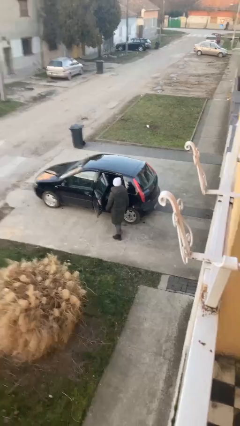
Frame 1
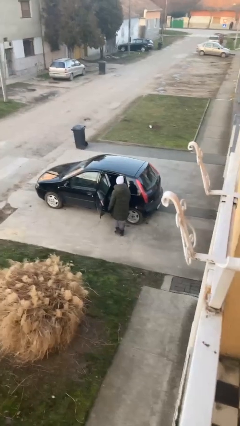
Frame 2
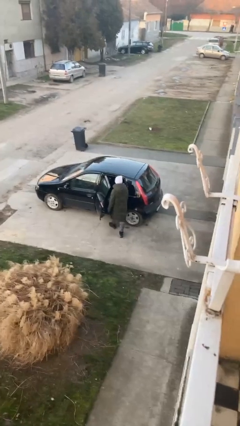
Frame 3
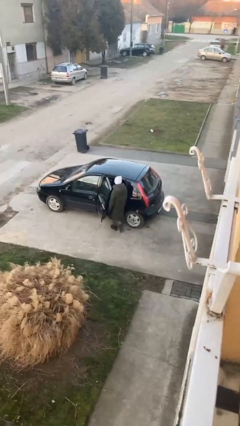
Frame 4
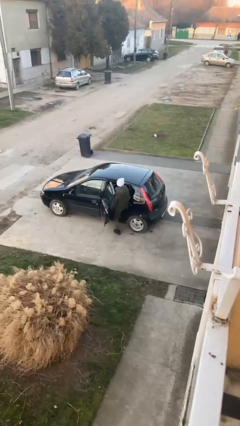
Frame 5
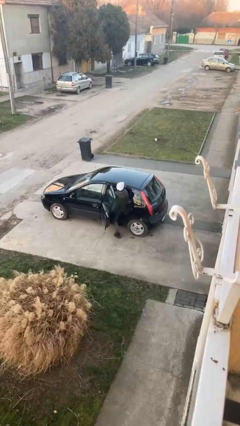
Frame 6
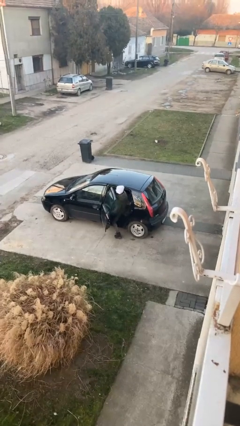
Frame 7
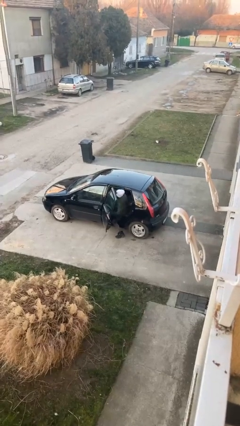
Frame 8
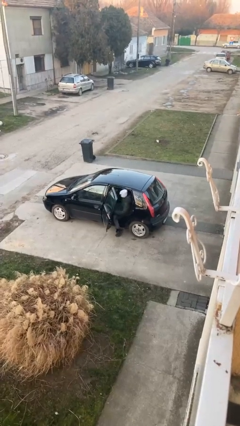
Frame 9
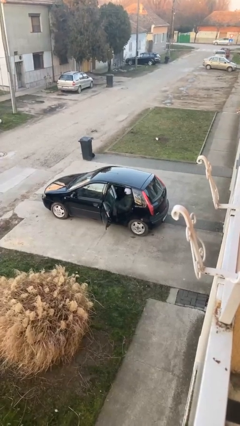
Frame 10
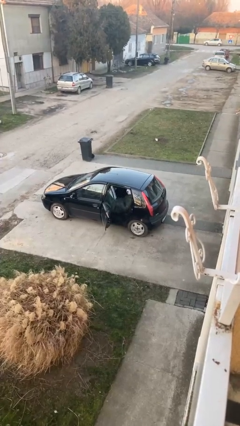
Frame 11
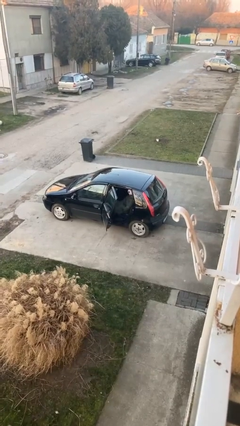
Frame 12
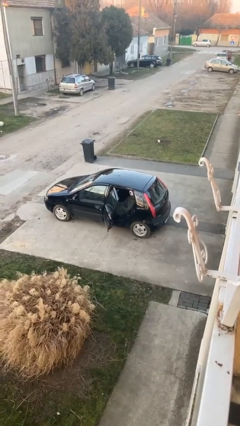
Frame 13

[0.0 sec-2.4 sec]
person enters car

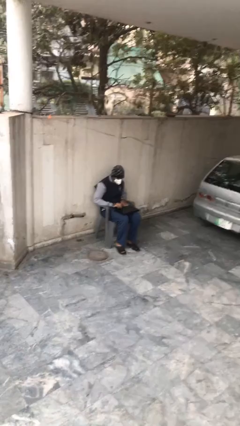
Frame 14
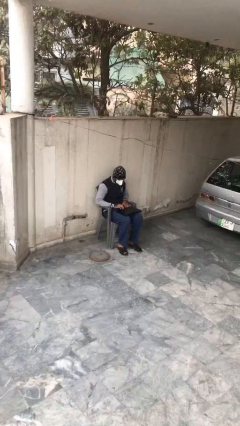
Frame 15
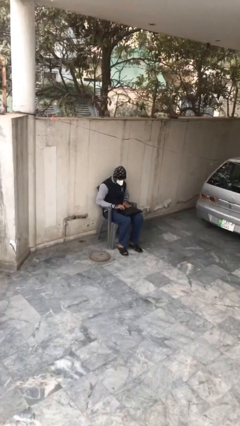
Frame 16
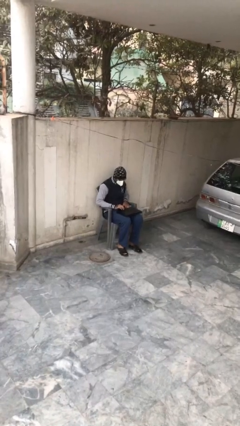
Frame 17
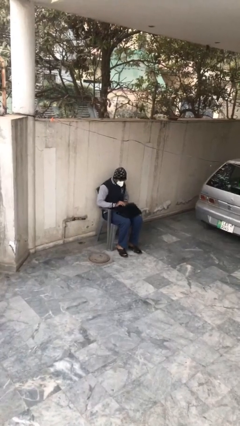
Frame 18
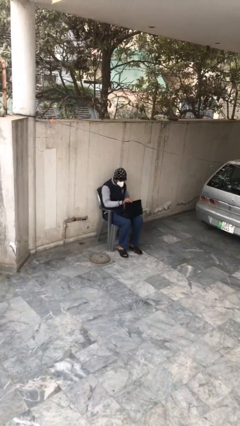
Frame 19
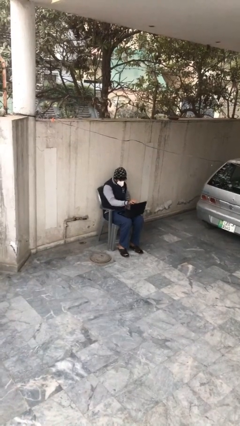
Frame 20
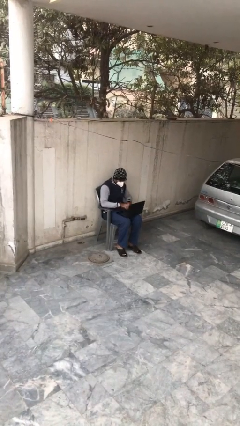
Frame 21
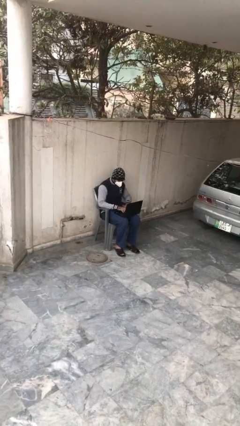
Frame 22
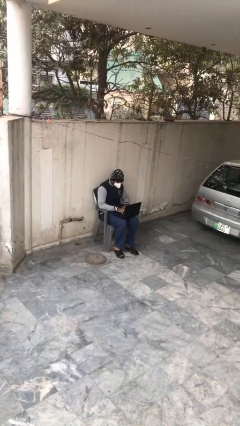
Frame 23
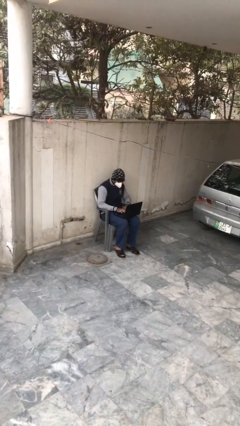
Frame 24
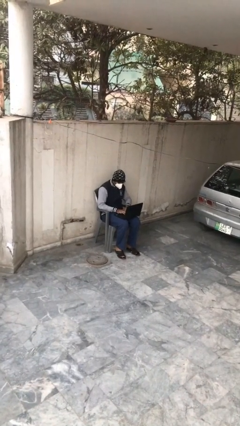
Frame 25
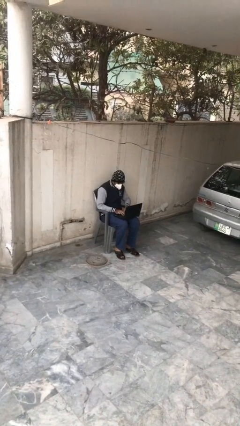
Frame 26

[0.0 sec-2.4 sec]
person interacts with laptop

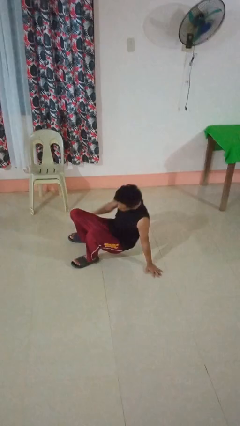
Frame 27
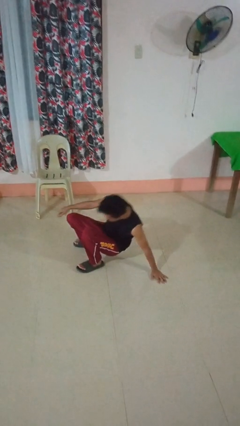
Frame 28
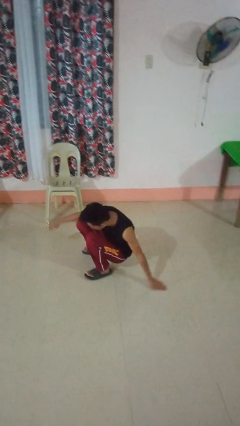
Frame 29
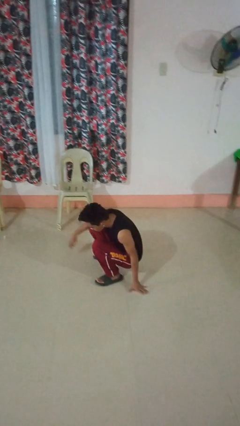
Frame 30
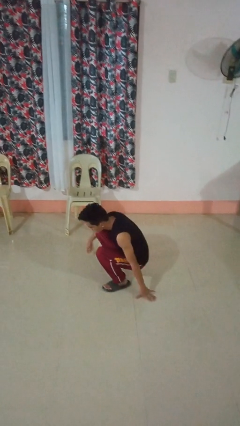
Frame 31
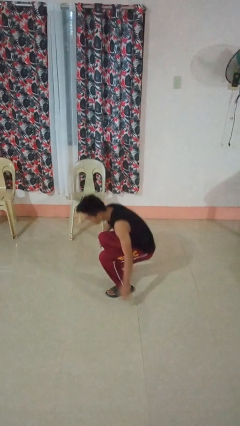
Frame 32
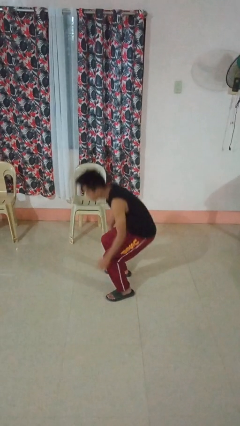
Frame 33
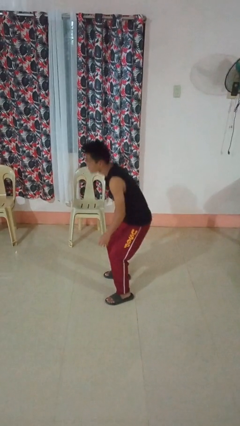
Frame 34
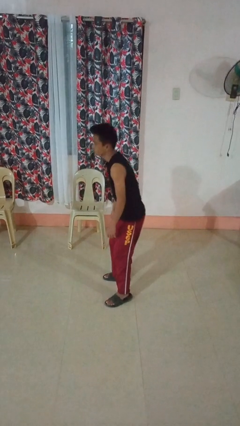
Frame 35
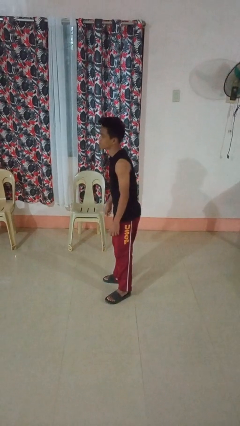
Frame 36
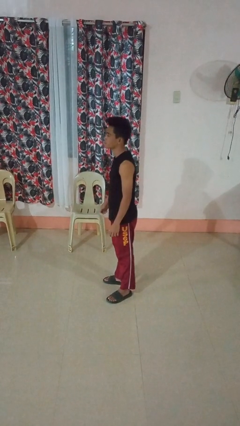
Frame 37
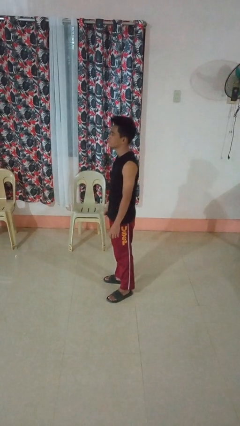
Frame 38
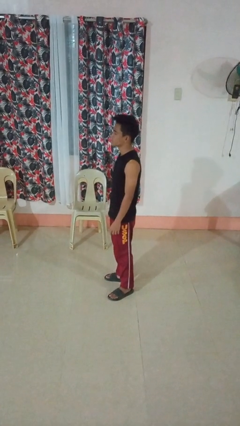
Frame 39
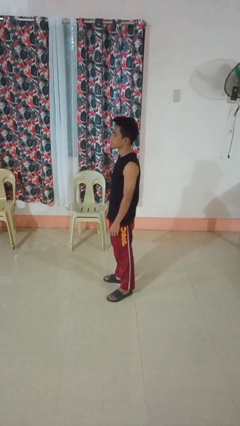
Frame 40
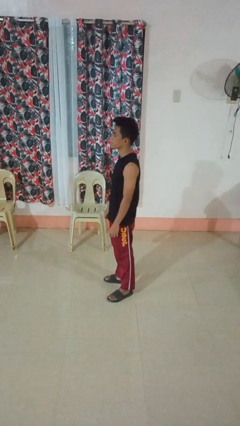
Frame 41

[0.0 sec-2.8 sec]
person stands up from floor

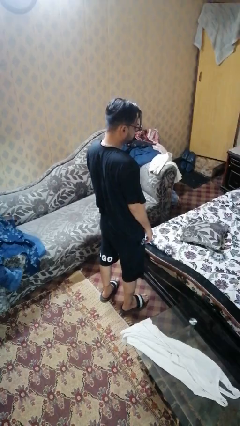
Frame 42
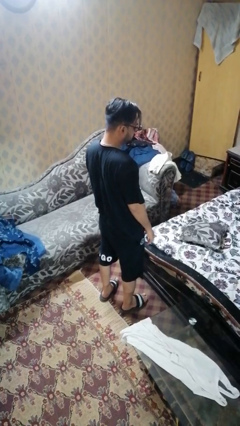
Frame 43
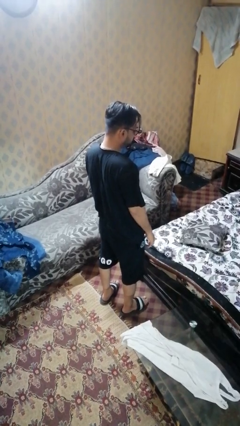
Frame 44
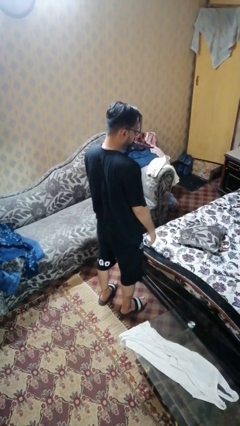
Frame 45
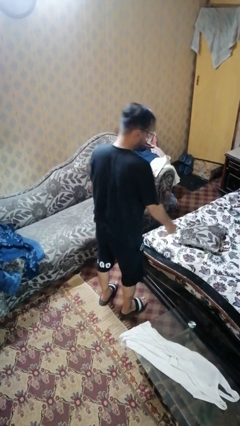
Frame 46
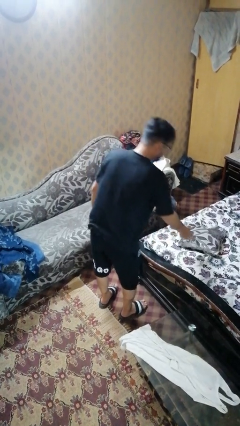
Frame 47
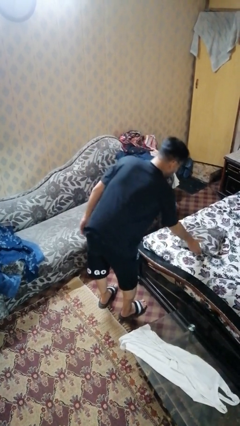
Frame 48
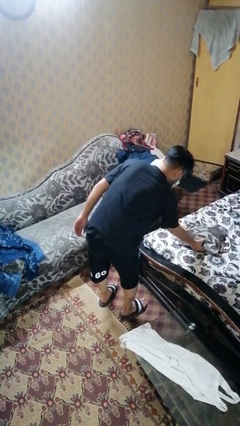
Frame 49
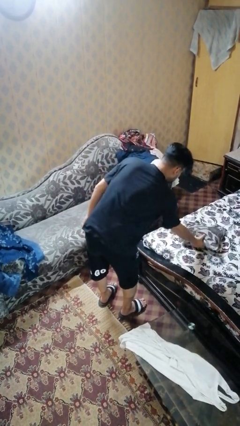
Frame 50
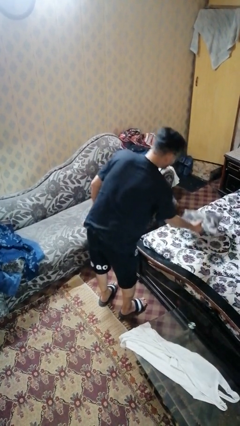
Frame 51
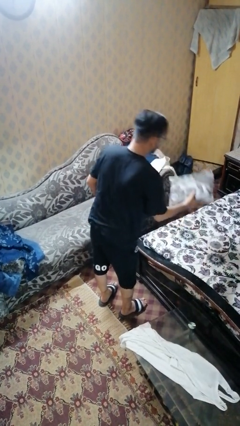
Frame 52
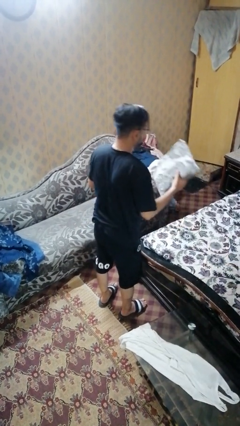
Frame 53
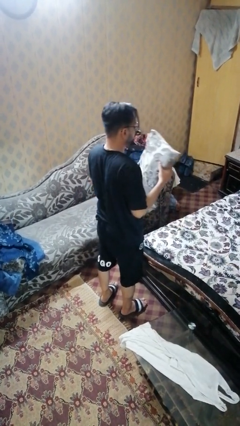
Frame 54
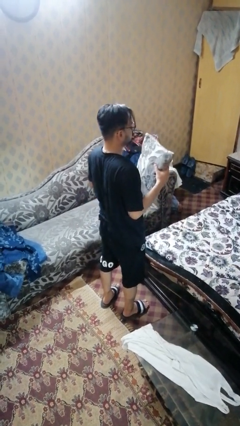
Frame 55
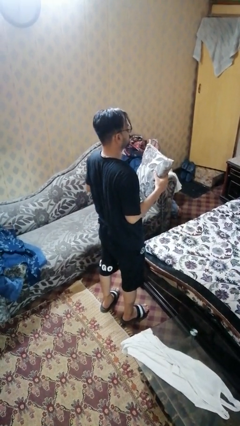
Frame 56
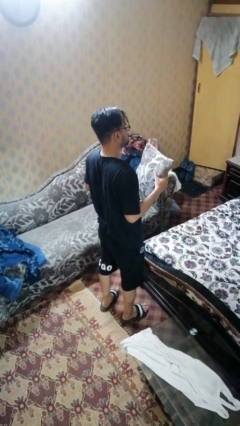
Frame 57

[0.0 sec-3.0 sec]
person picks up object from bed

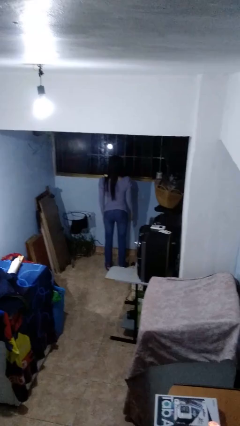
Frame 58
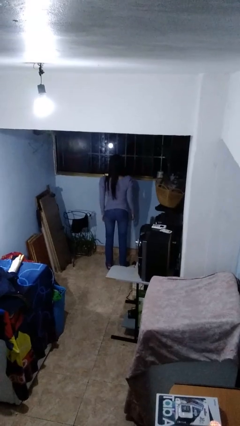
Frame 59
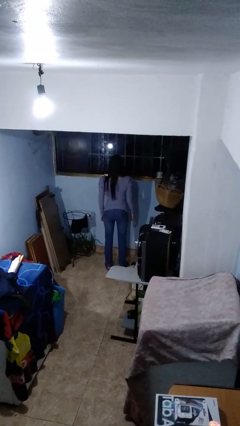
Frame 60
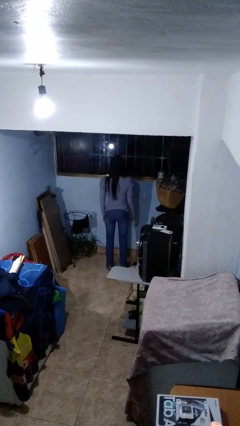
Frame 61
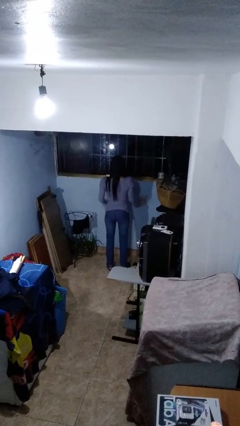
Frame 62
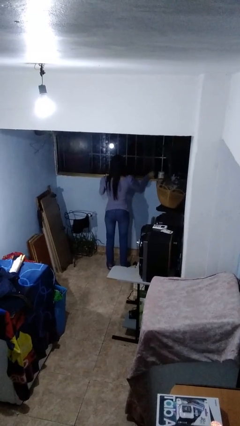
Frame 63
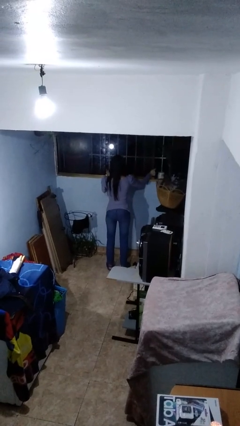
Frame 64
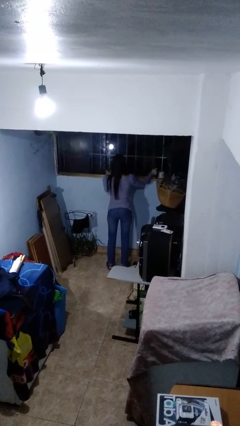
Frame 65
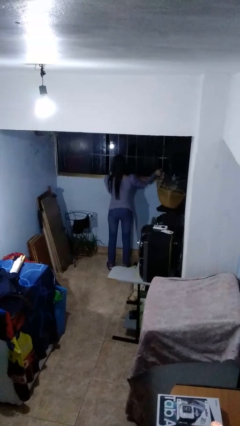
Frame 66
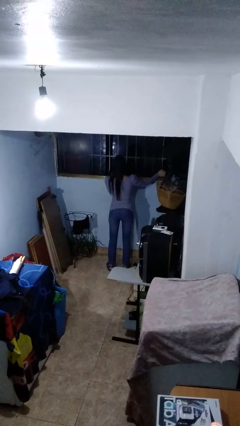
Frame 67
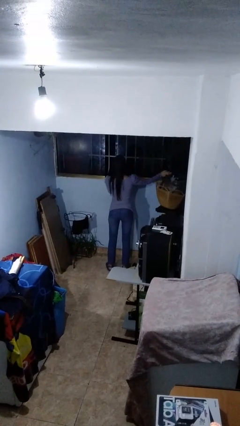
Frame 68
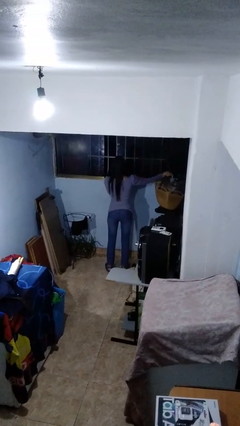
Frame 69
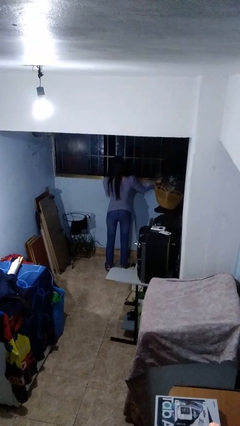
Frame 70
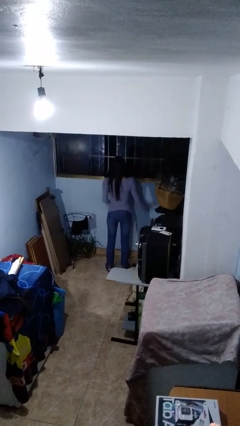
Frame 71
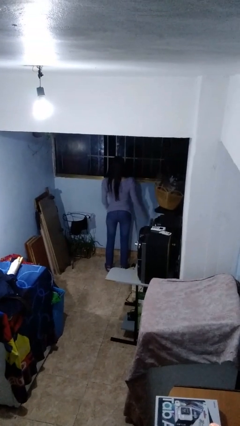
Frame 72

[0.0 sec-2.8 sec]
person opens home window

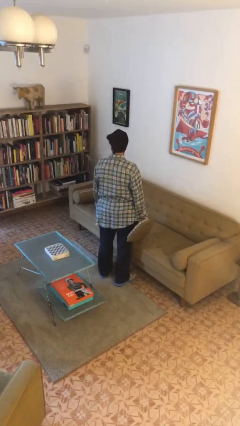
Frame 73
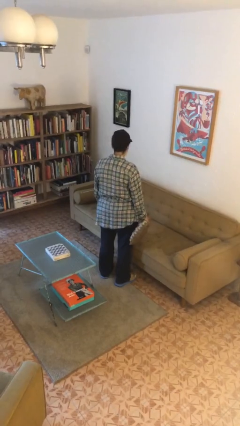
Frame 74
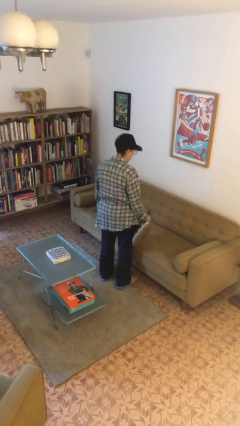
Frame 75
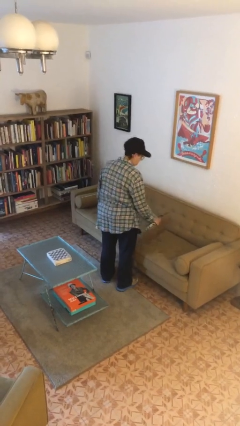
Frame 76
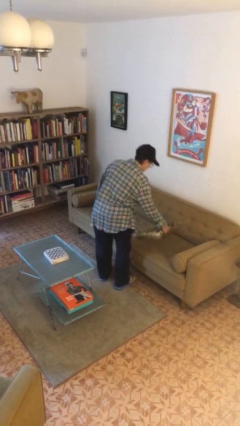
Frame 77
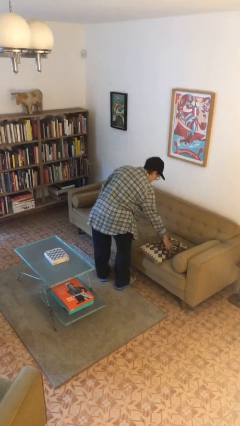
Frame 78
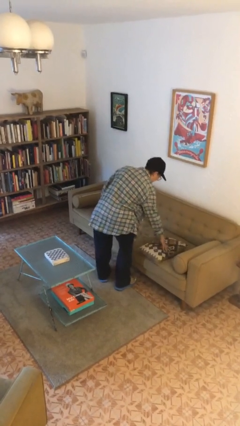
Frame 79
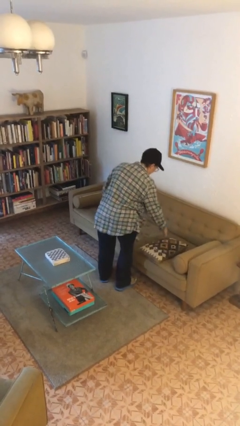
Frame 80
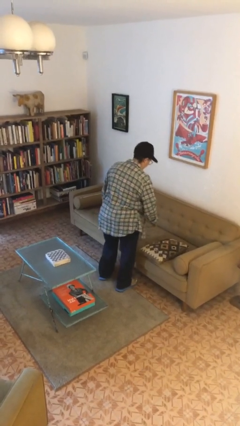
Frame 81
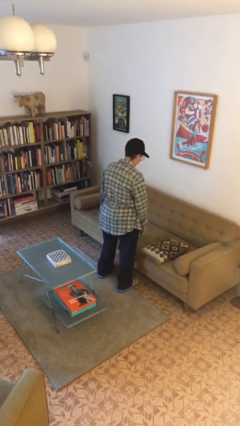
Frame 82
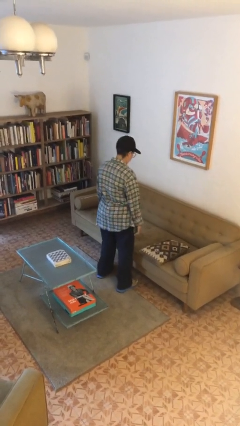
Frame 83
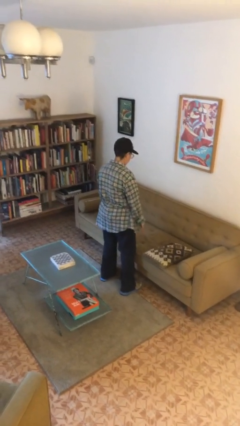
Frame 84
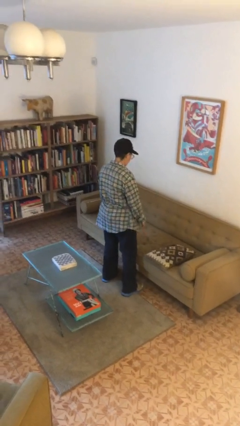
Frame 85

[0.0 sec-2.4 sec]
person puts down object on couch

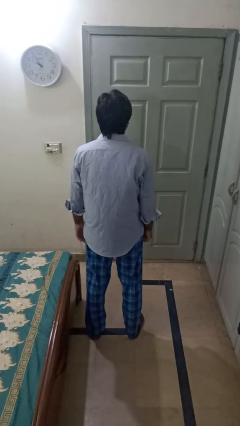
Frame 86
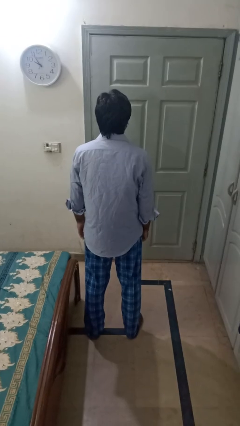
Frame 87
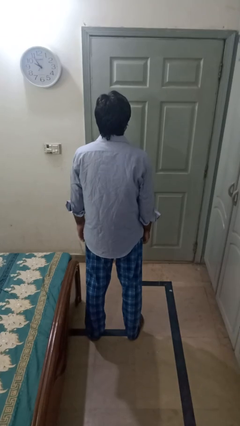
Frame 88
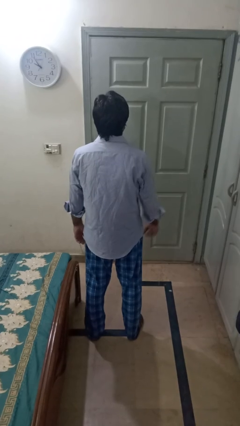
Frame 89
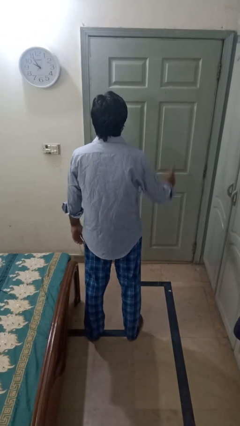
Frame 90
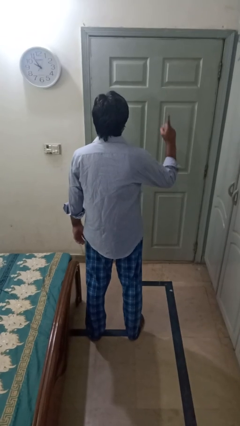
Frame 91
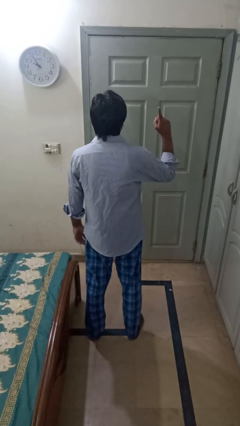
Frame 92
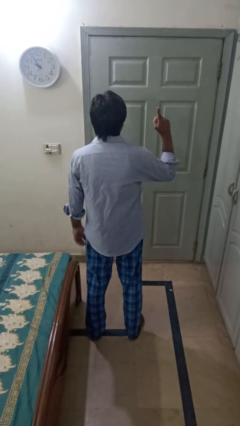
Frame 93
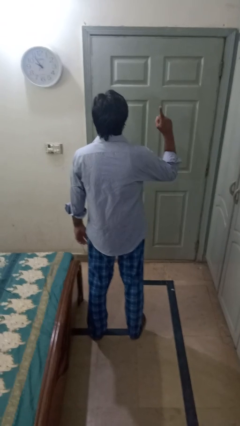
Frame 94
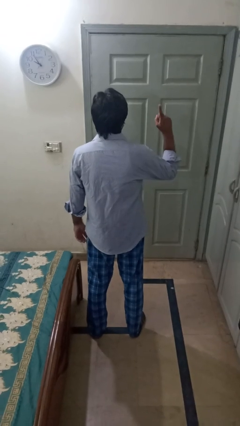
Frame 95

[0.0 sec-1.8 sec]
person gestures number one
